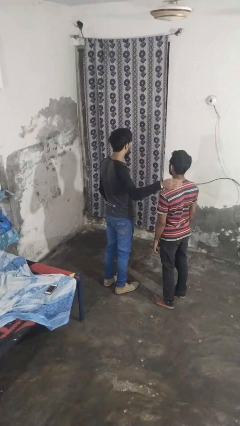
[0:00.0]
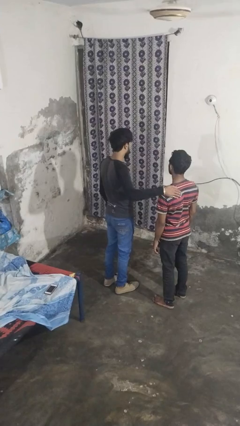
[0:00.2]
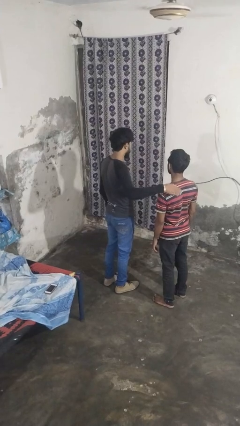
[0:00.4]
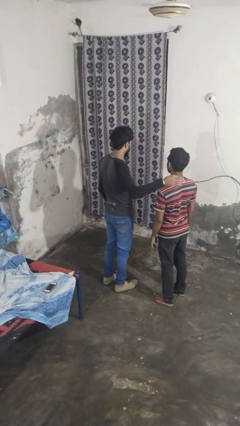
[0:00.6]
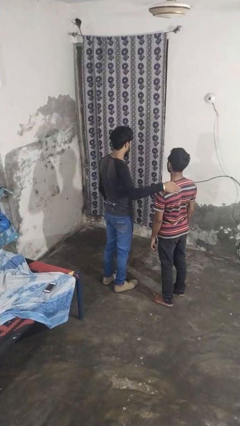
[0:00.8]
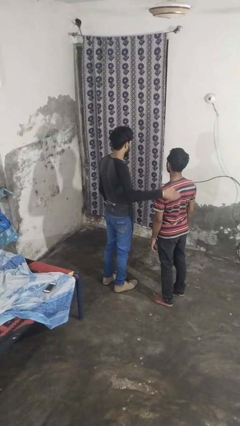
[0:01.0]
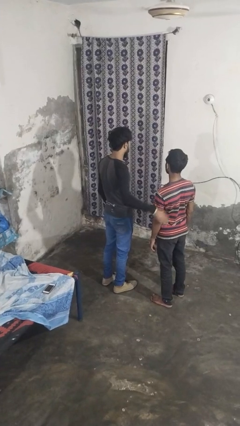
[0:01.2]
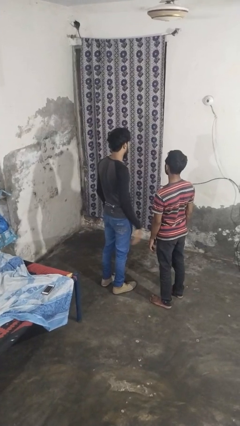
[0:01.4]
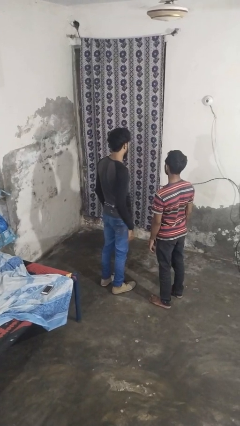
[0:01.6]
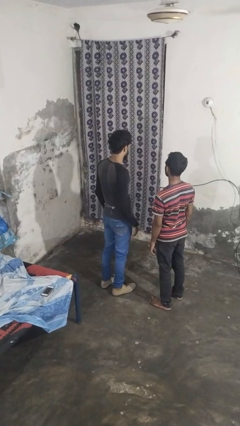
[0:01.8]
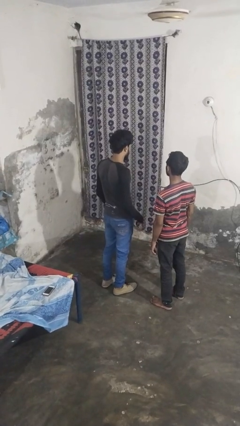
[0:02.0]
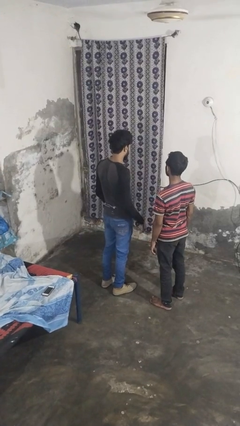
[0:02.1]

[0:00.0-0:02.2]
person pounds shoulders of person

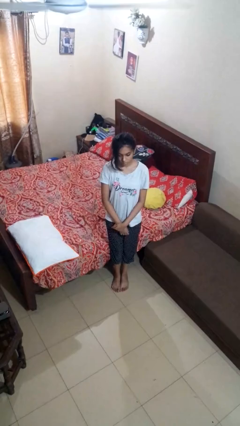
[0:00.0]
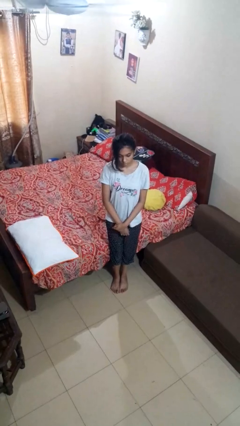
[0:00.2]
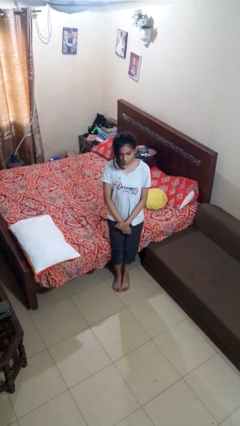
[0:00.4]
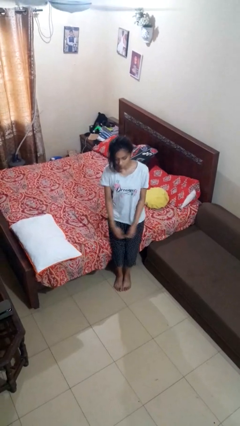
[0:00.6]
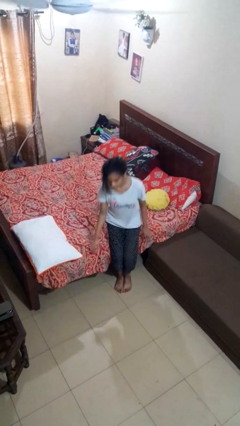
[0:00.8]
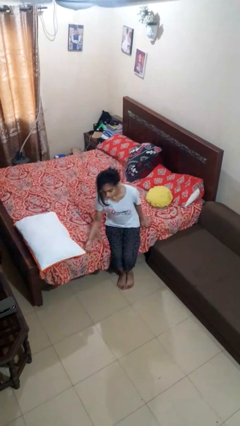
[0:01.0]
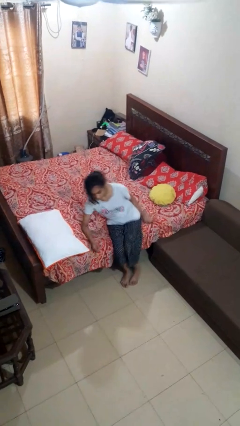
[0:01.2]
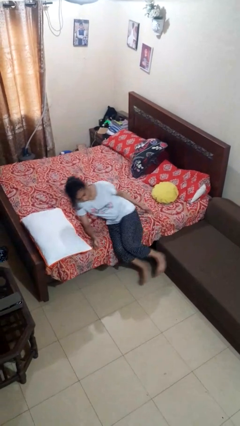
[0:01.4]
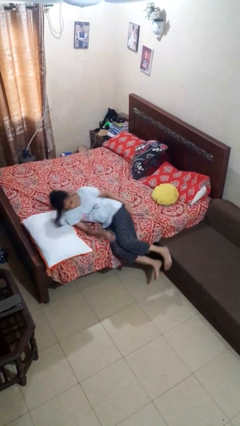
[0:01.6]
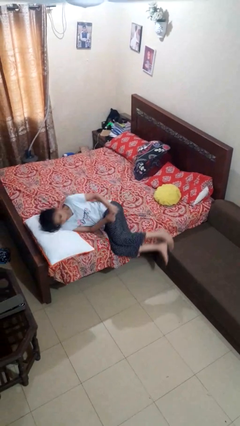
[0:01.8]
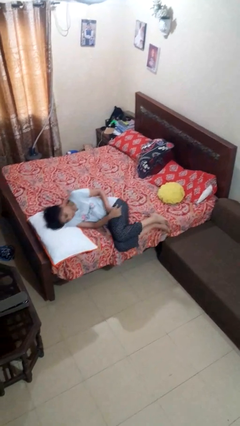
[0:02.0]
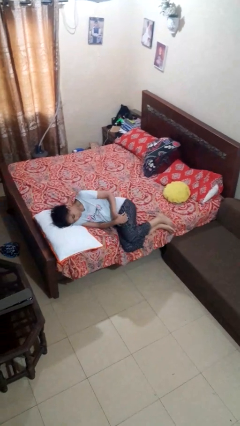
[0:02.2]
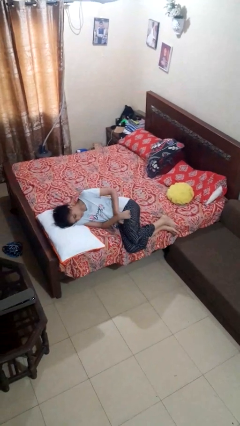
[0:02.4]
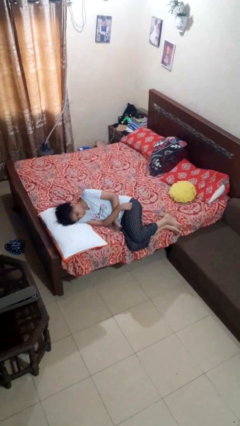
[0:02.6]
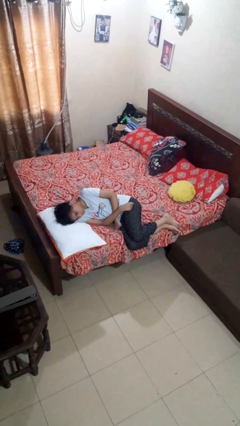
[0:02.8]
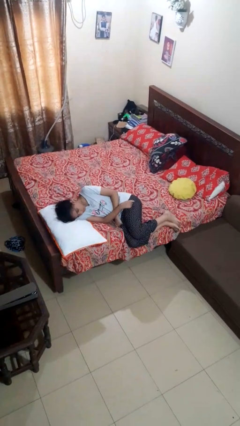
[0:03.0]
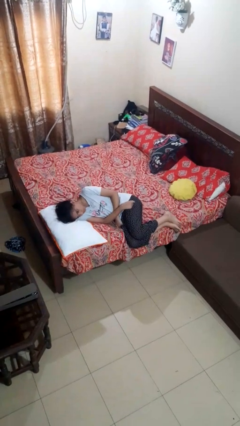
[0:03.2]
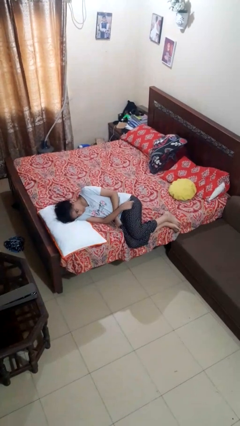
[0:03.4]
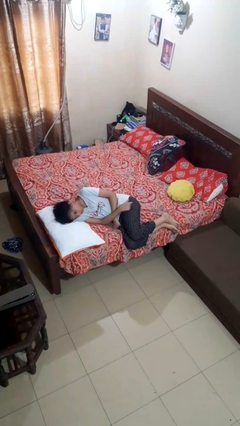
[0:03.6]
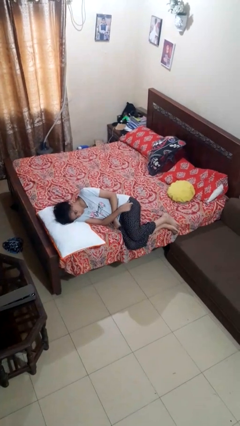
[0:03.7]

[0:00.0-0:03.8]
person lies down on bed

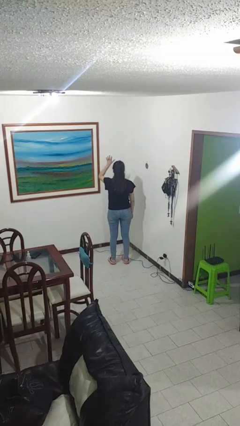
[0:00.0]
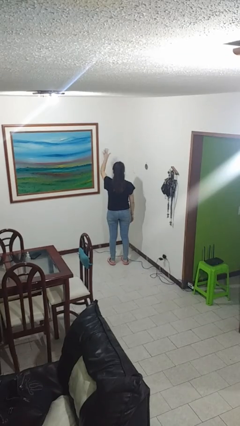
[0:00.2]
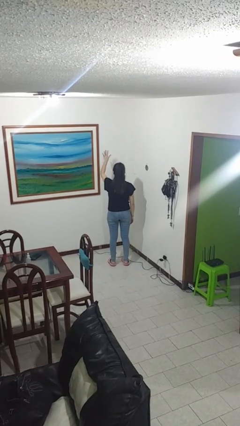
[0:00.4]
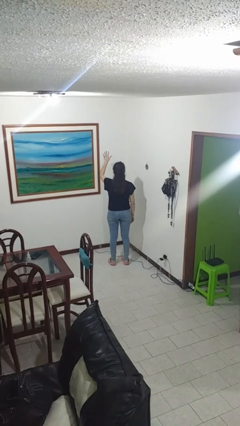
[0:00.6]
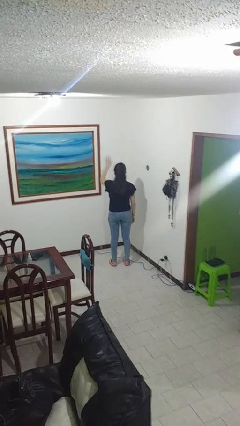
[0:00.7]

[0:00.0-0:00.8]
person gestures number five

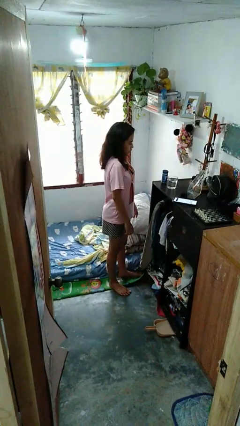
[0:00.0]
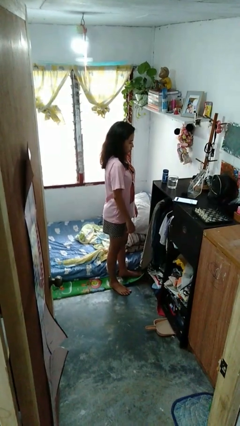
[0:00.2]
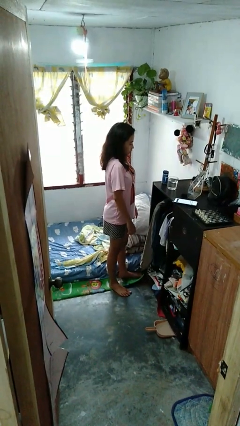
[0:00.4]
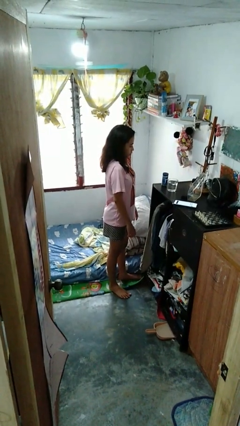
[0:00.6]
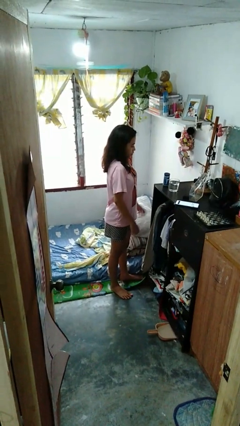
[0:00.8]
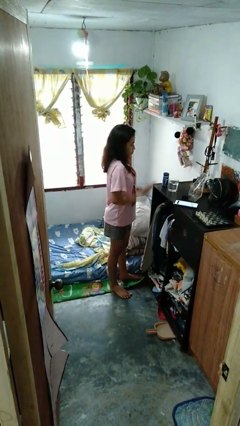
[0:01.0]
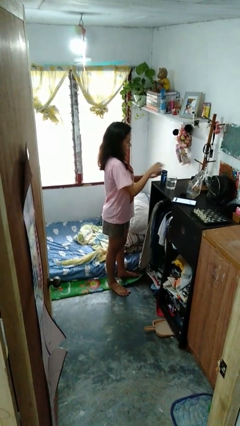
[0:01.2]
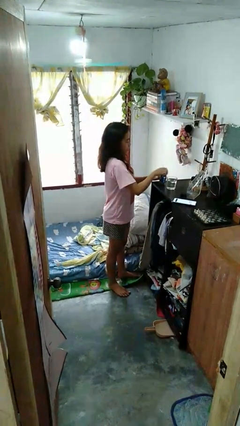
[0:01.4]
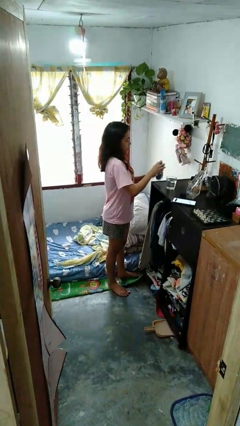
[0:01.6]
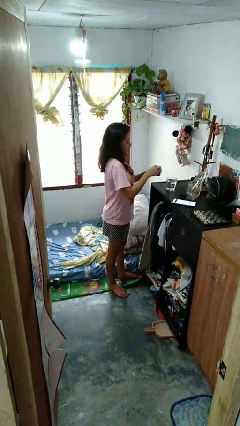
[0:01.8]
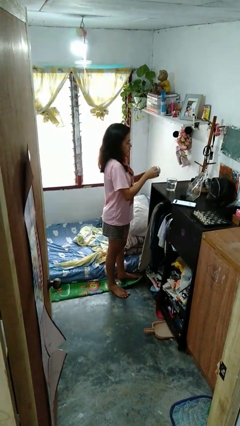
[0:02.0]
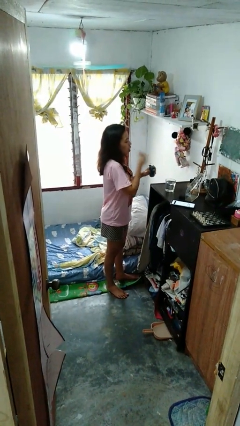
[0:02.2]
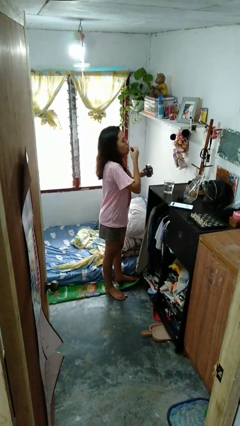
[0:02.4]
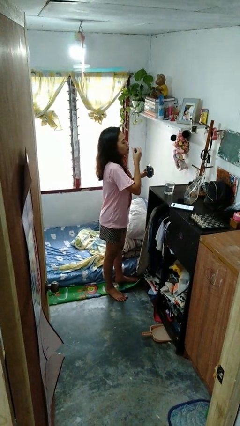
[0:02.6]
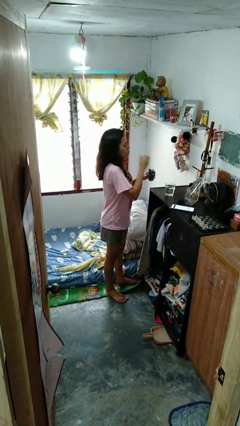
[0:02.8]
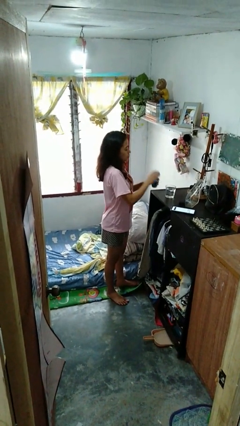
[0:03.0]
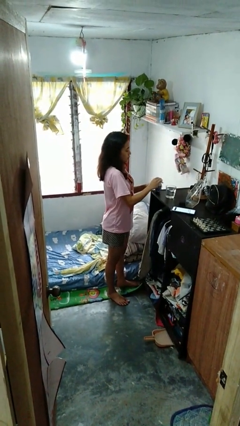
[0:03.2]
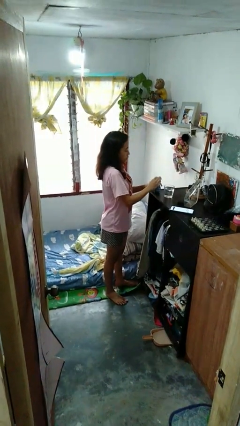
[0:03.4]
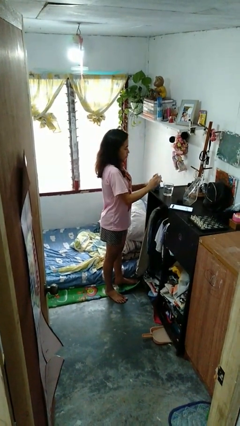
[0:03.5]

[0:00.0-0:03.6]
person takes medicine pills

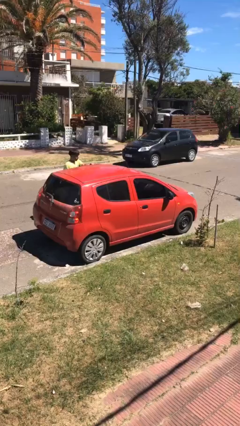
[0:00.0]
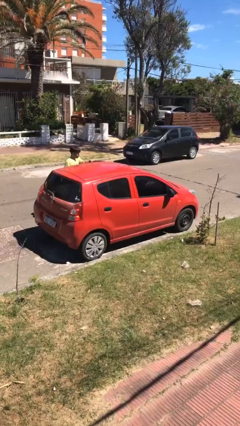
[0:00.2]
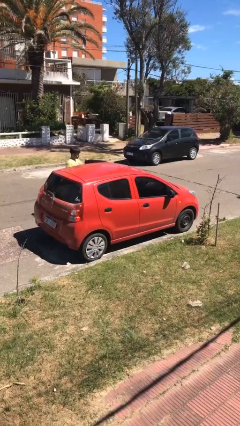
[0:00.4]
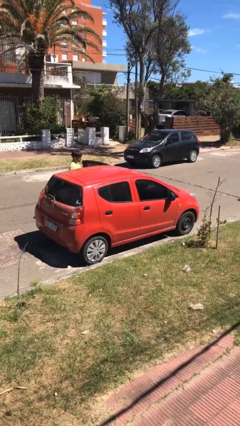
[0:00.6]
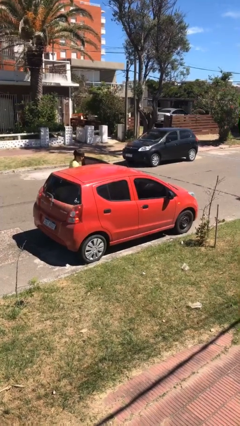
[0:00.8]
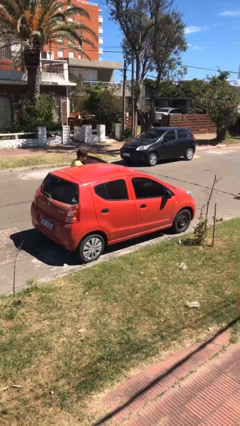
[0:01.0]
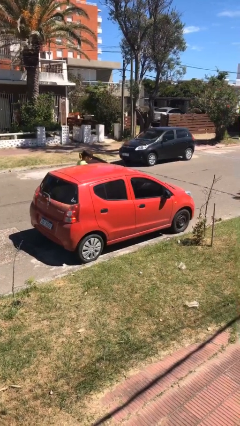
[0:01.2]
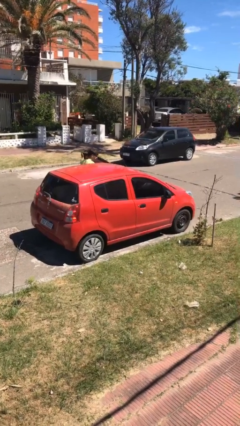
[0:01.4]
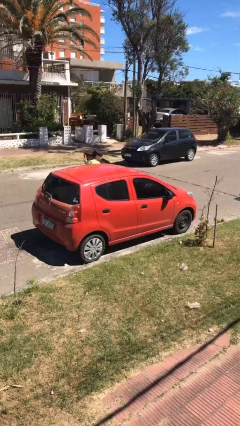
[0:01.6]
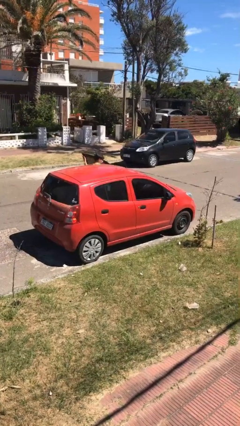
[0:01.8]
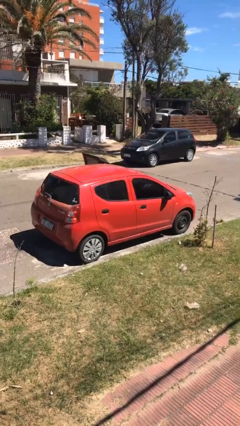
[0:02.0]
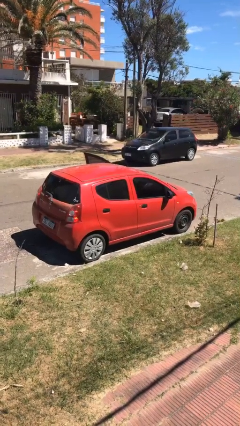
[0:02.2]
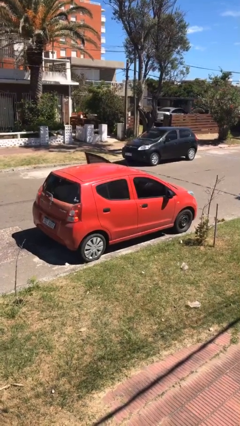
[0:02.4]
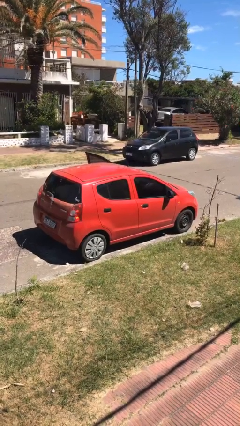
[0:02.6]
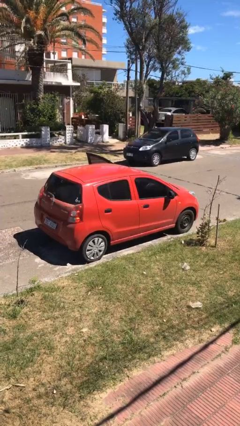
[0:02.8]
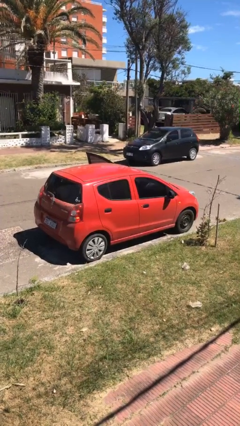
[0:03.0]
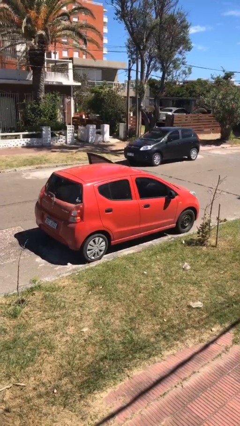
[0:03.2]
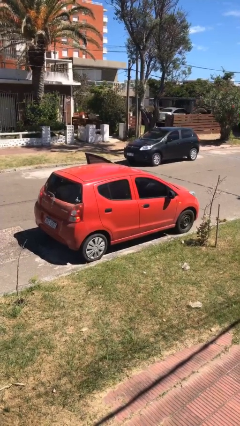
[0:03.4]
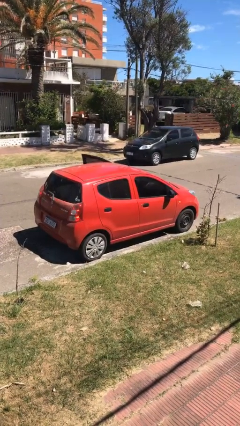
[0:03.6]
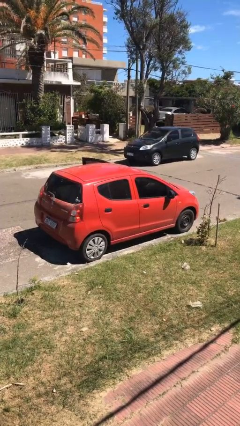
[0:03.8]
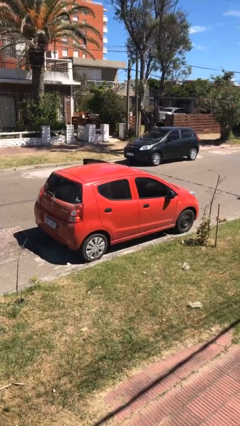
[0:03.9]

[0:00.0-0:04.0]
car picks up person

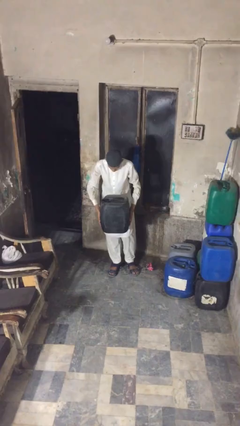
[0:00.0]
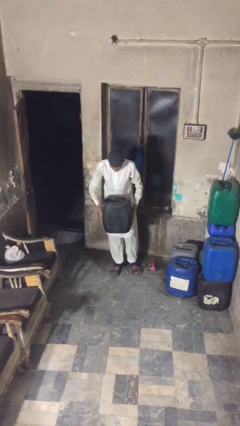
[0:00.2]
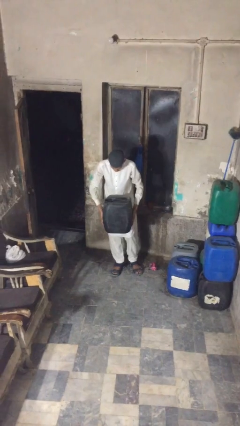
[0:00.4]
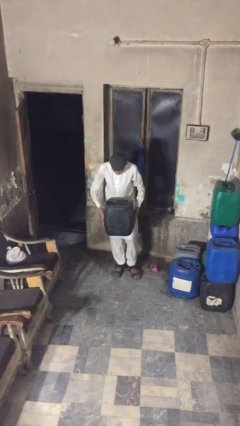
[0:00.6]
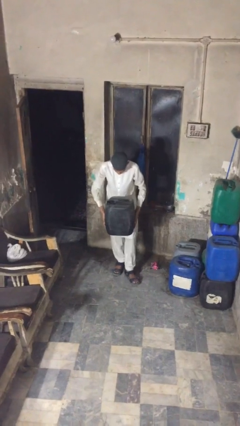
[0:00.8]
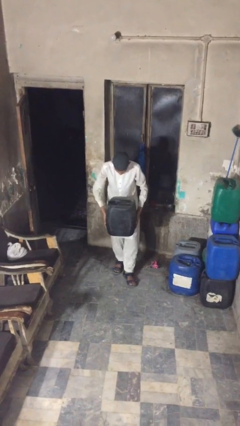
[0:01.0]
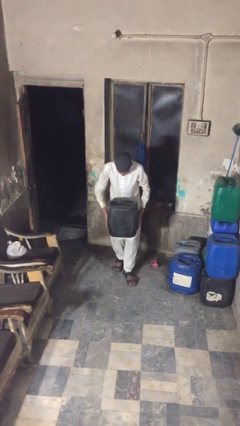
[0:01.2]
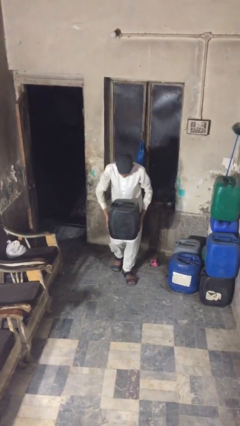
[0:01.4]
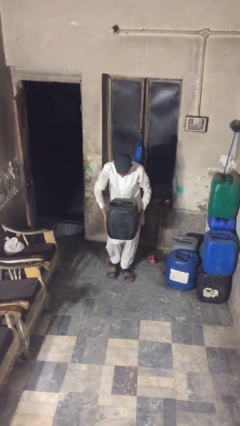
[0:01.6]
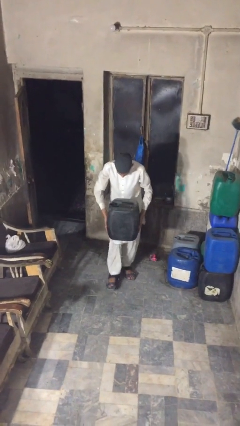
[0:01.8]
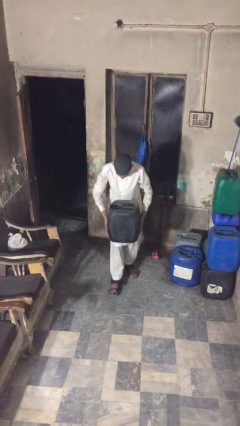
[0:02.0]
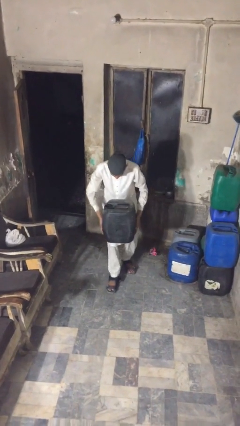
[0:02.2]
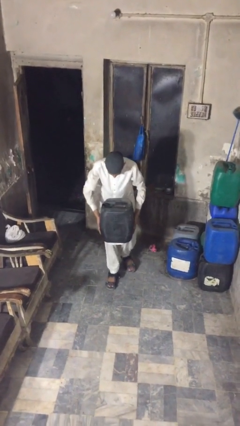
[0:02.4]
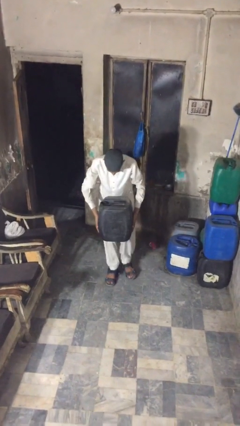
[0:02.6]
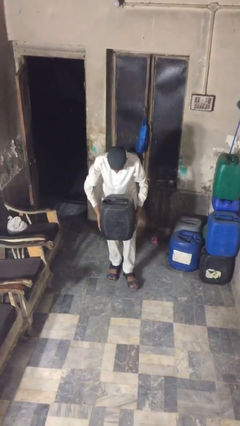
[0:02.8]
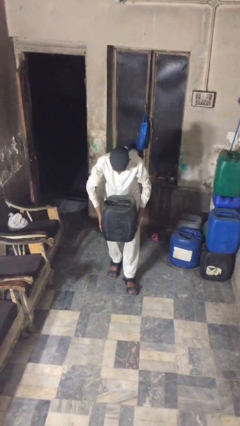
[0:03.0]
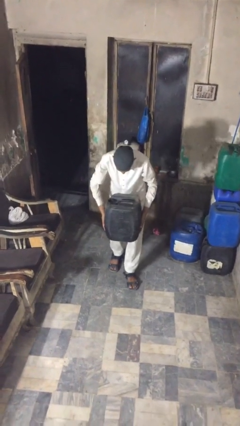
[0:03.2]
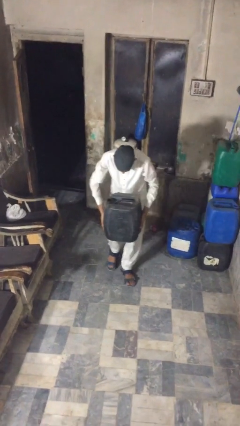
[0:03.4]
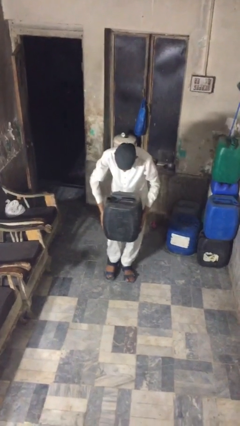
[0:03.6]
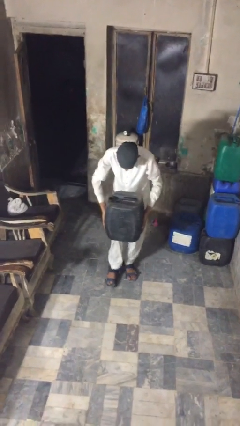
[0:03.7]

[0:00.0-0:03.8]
person carries heavy object
